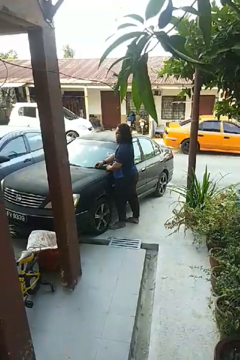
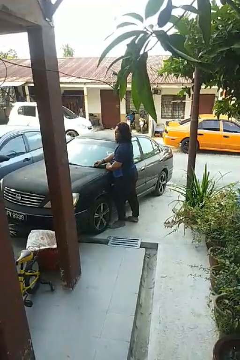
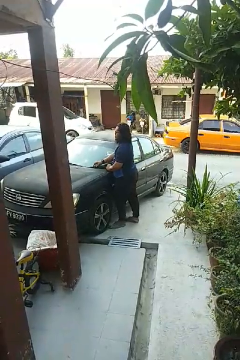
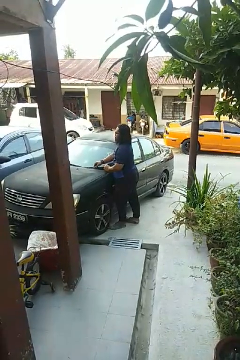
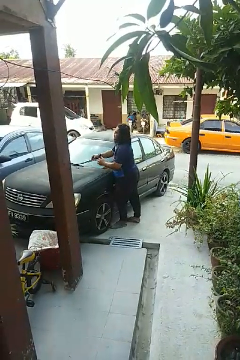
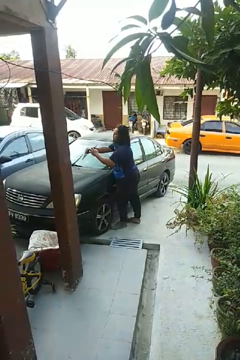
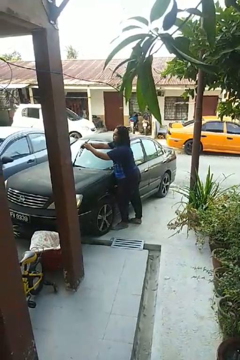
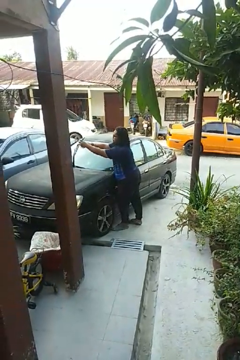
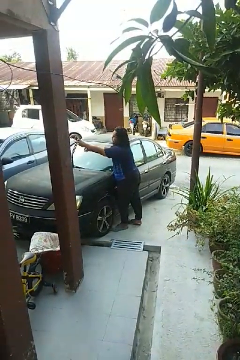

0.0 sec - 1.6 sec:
person flips up car wipers

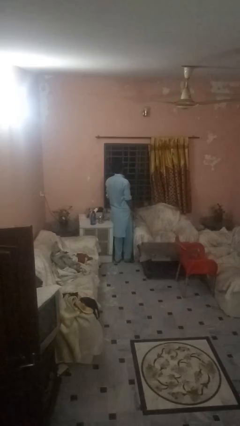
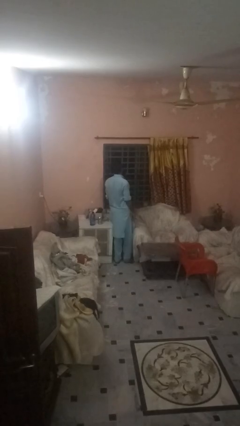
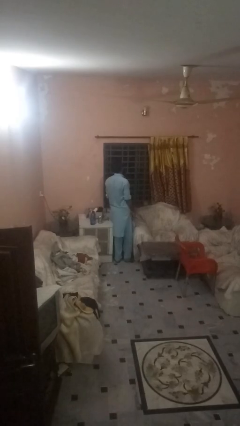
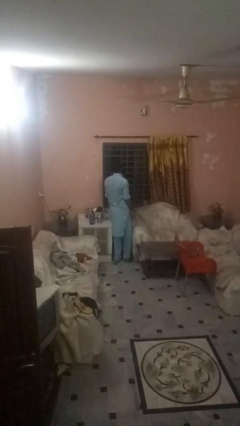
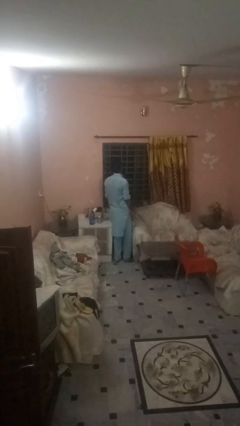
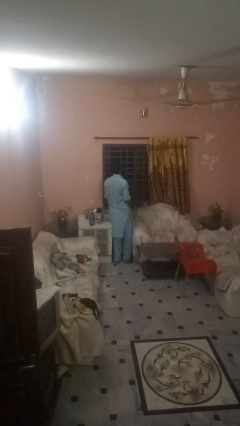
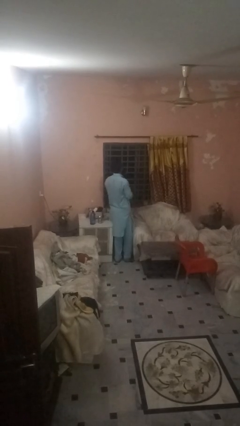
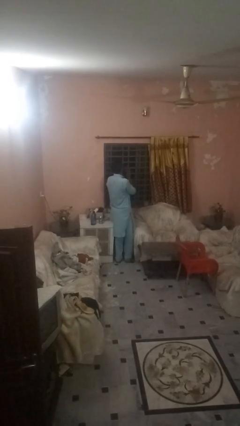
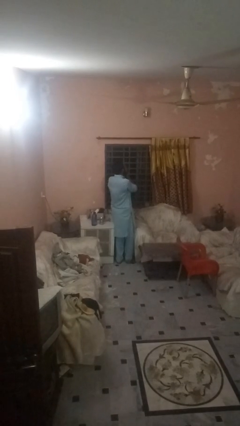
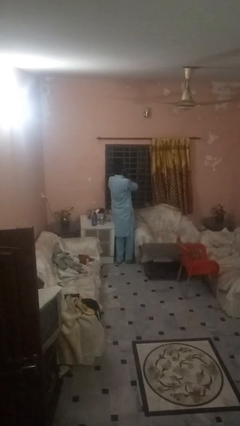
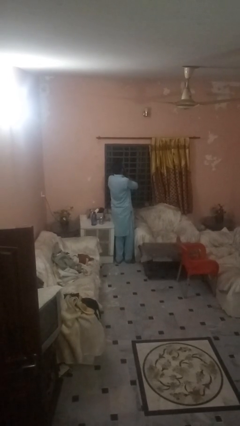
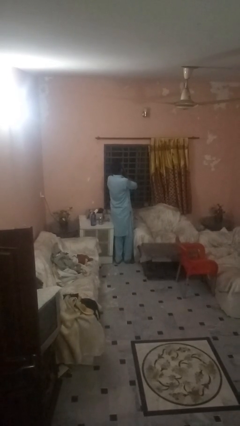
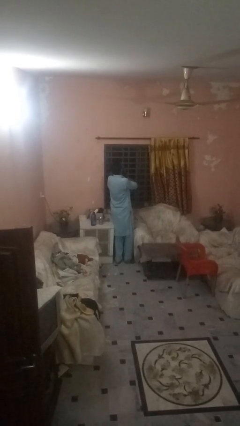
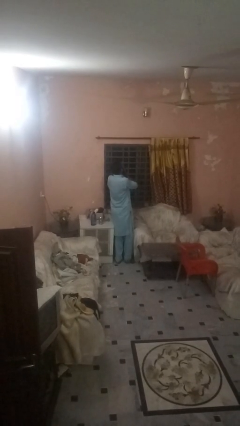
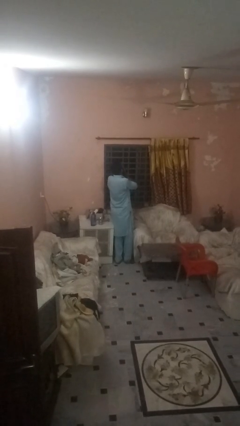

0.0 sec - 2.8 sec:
person covers face with hands

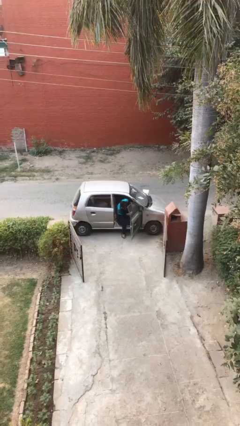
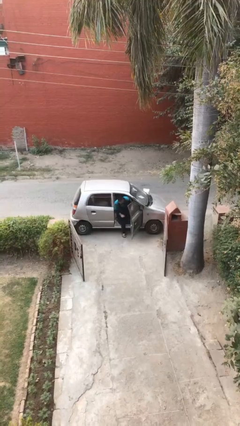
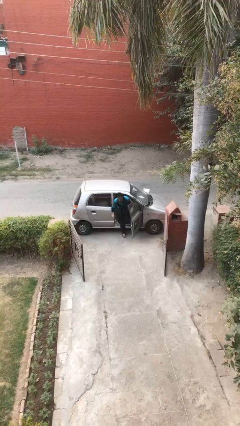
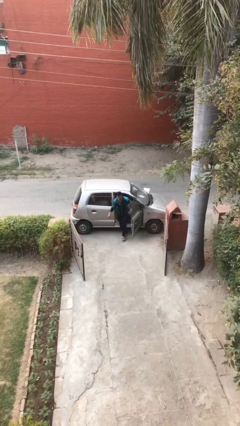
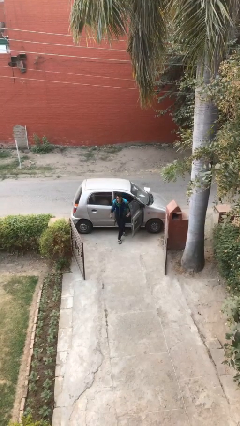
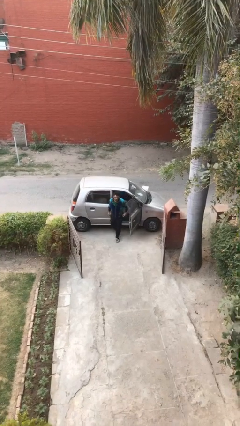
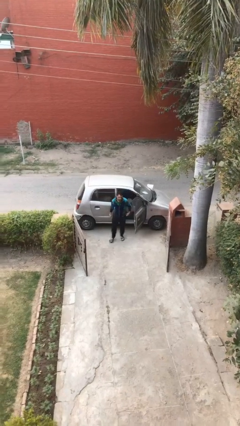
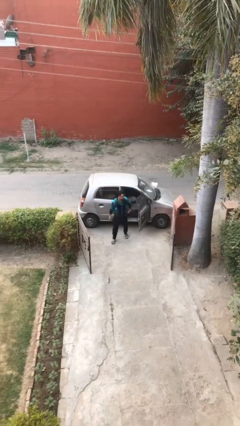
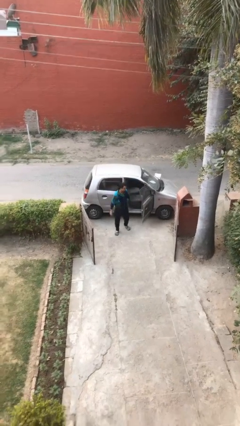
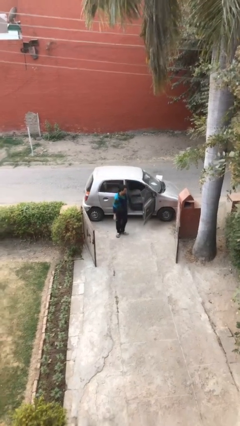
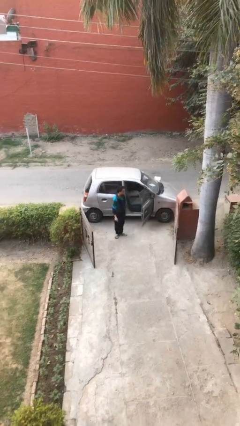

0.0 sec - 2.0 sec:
person exits car

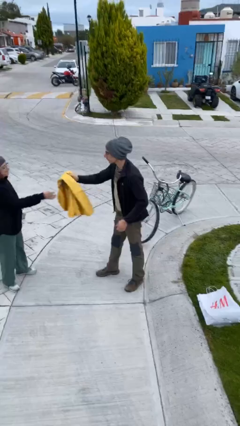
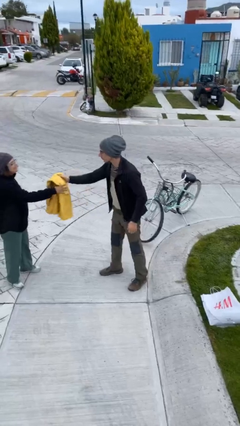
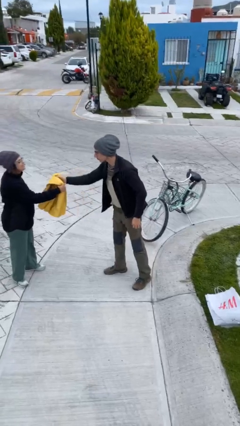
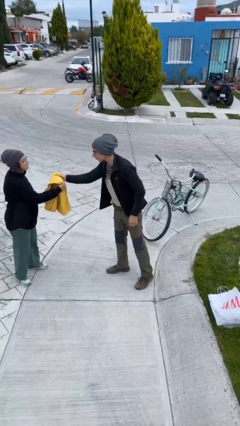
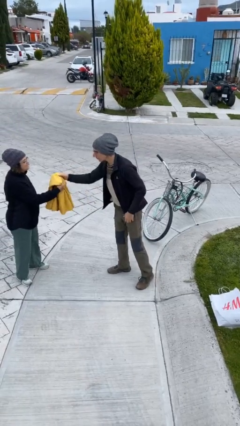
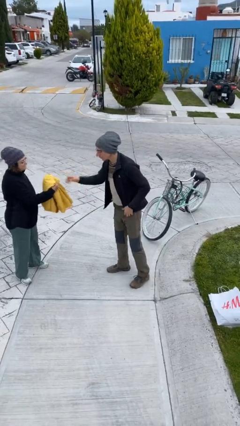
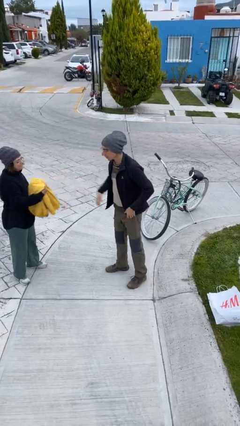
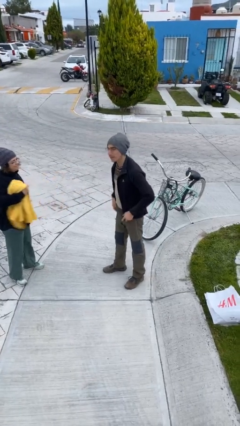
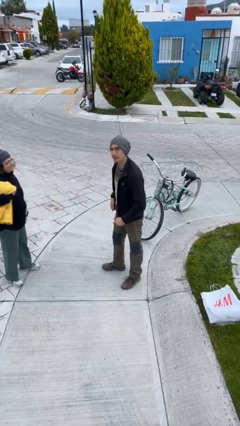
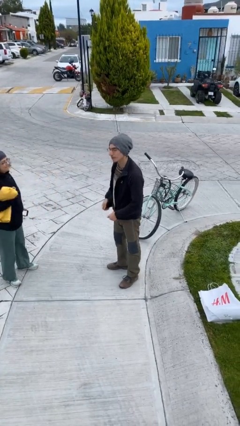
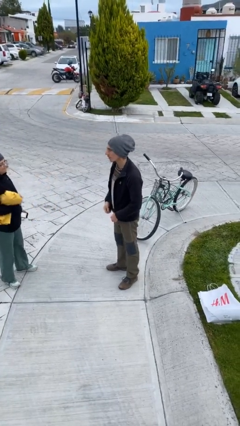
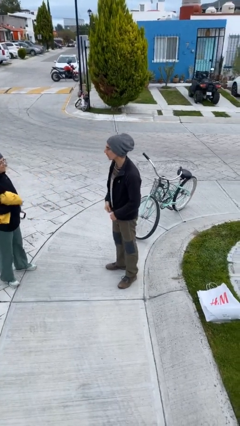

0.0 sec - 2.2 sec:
person transfers object to person

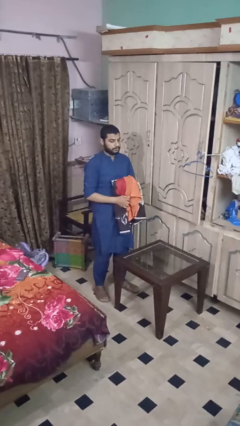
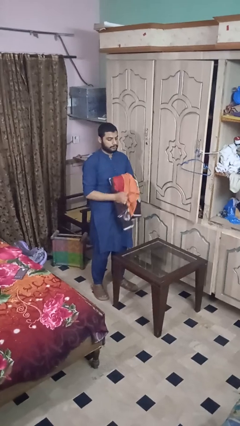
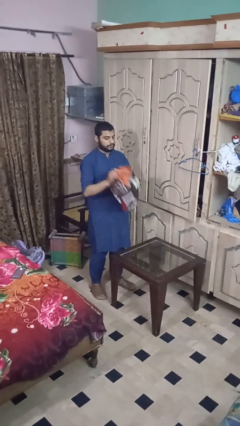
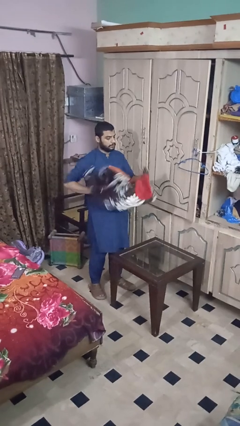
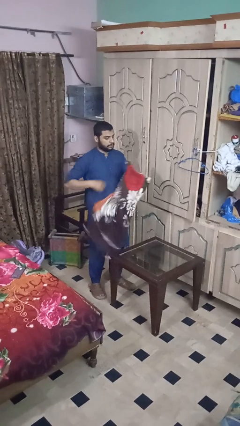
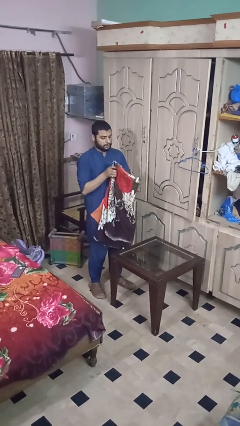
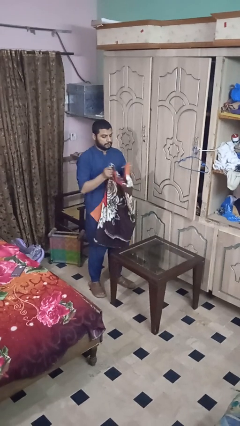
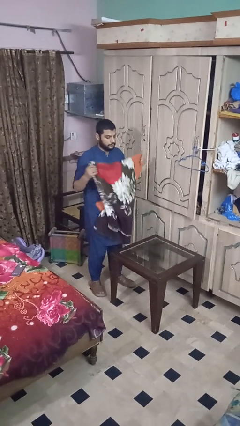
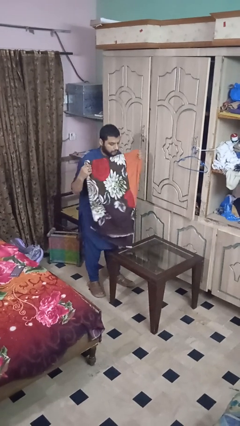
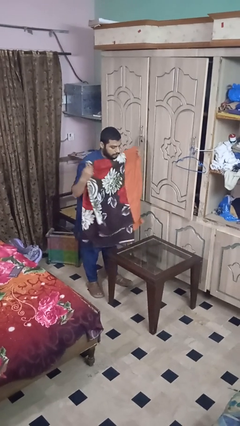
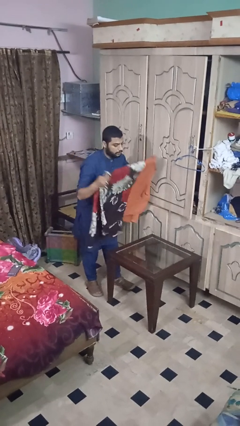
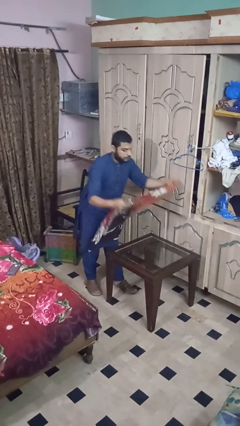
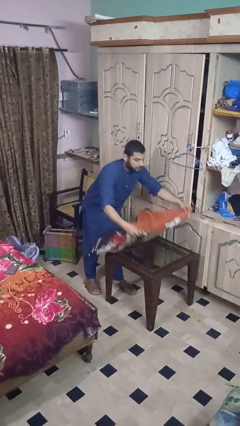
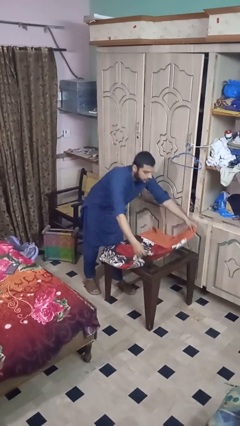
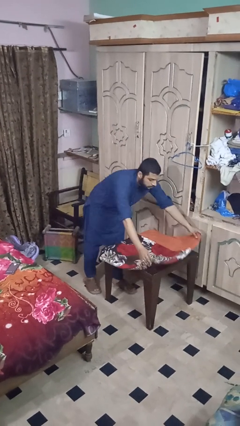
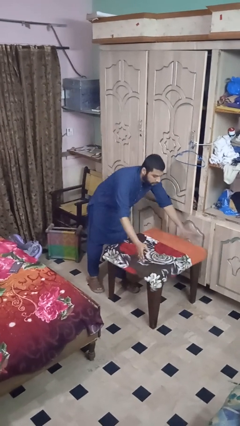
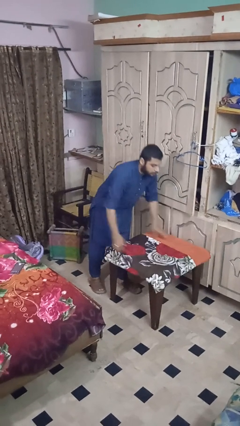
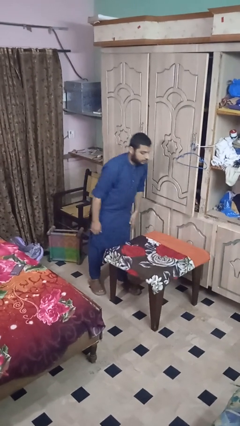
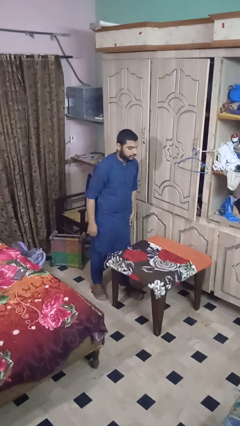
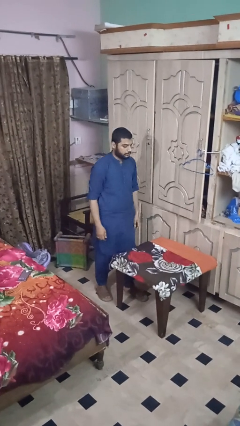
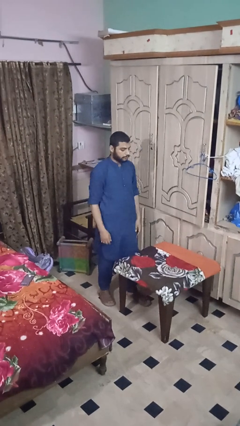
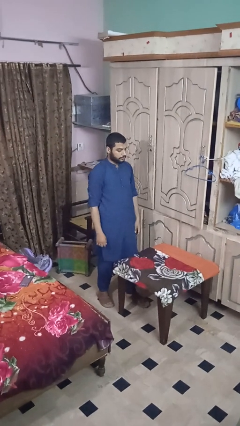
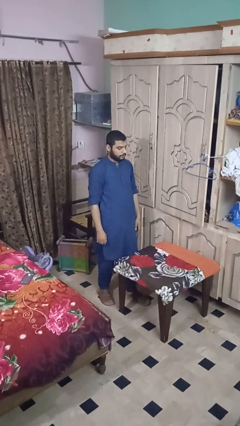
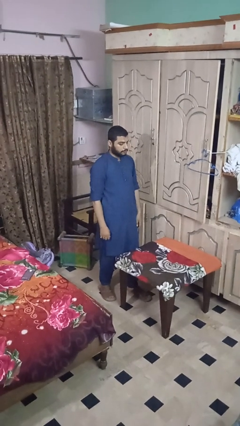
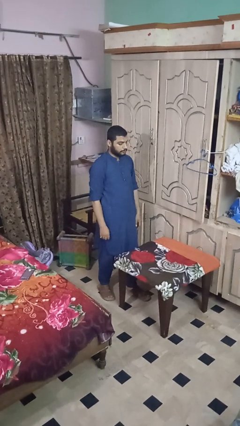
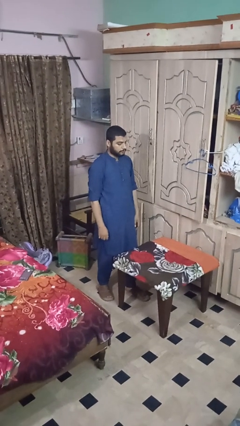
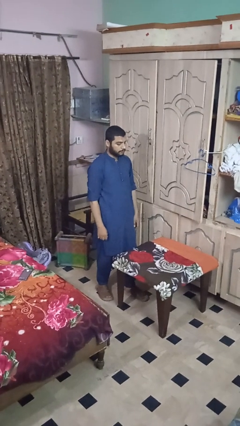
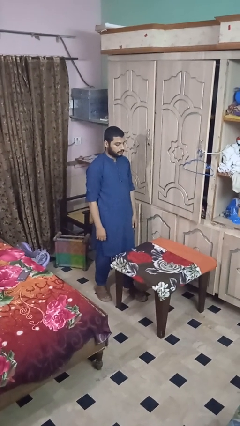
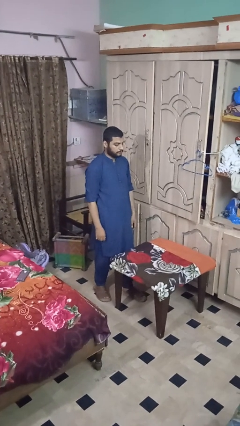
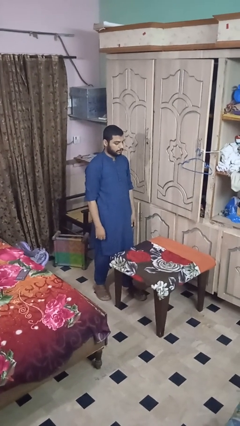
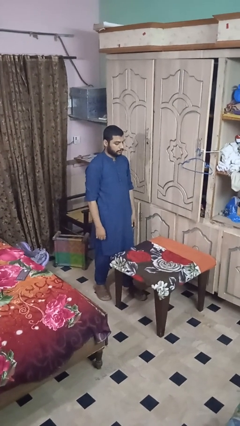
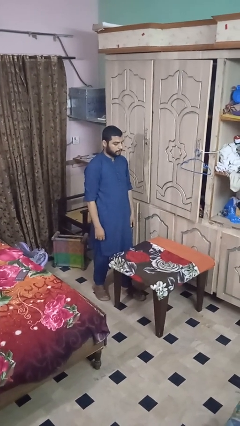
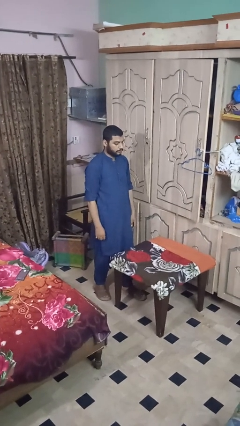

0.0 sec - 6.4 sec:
person spreads tablecloth

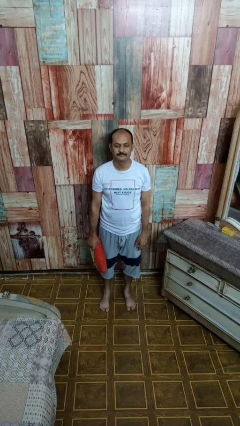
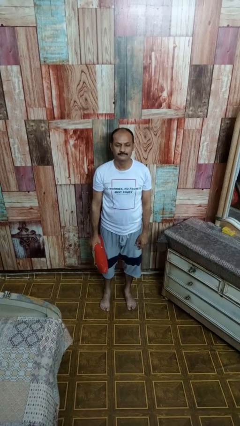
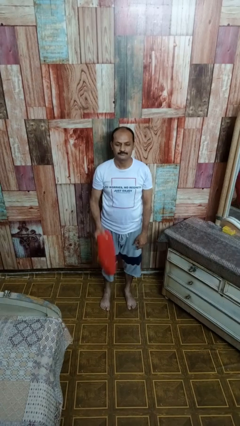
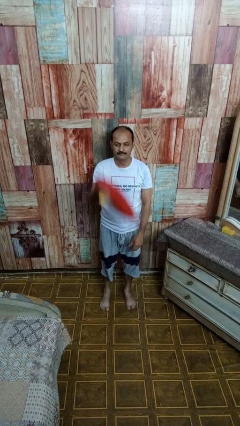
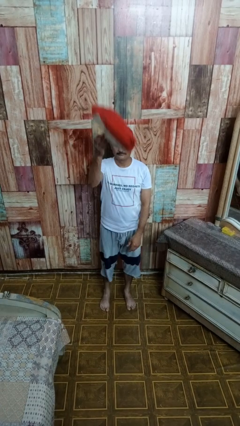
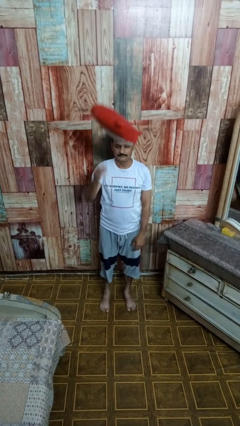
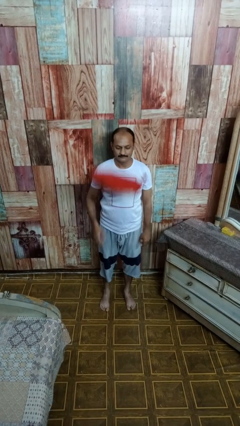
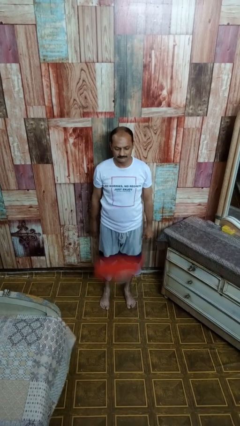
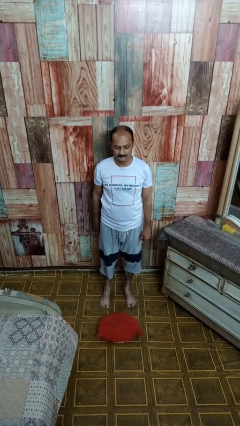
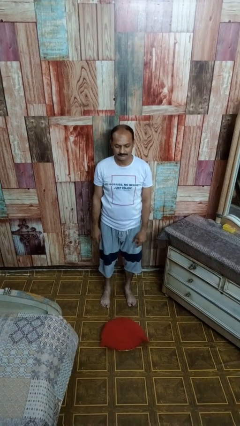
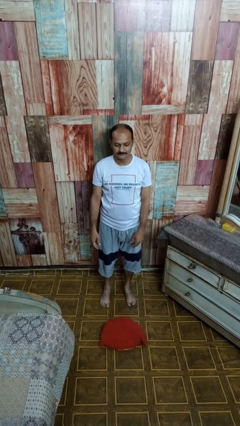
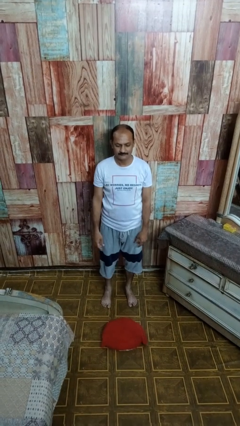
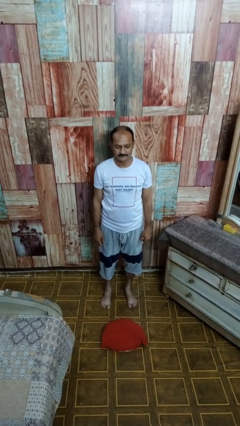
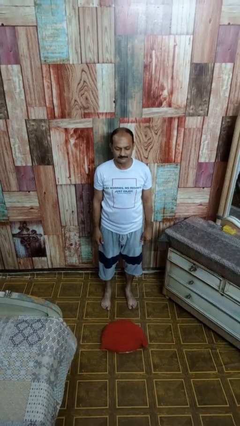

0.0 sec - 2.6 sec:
person throws object into air
